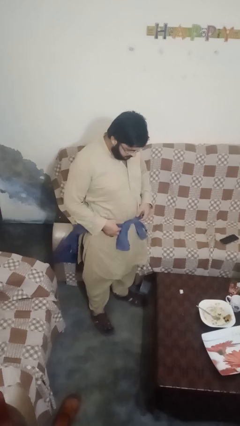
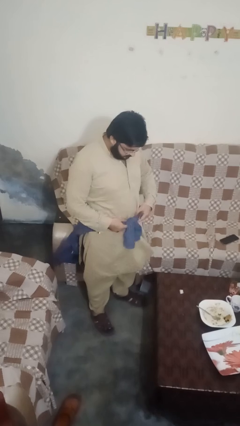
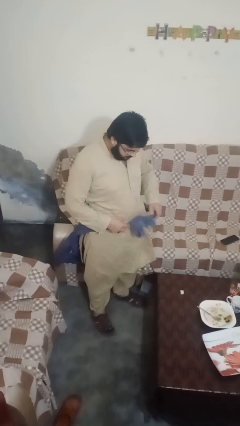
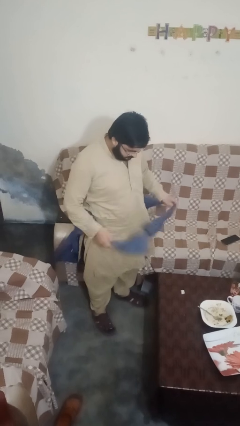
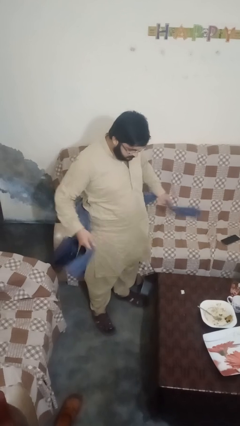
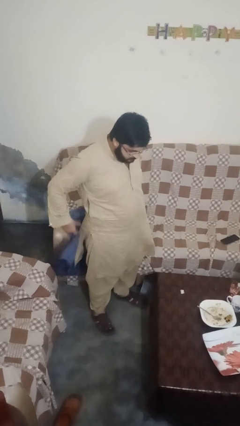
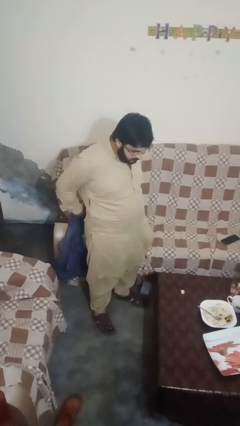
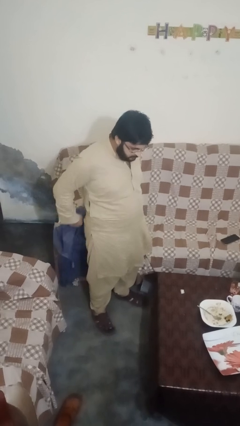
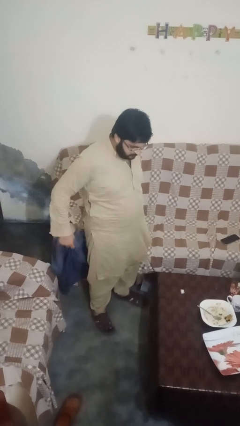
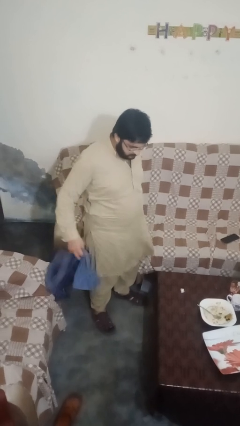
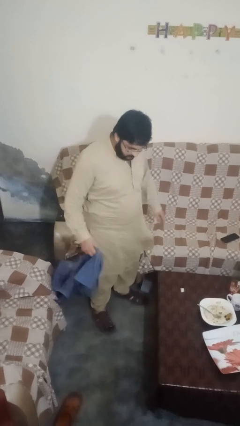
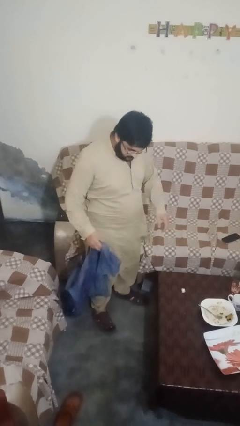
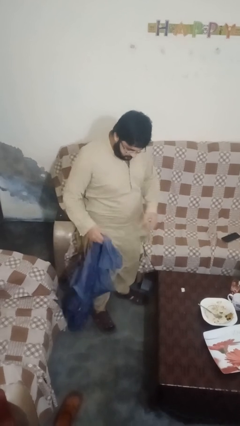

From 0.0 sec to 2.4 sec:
person unties jacket around waist

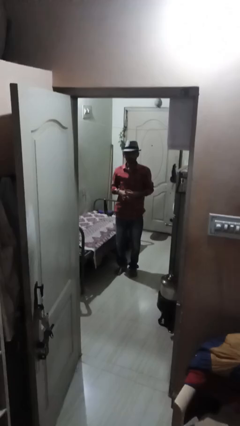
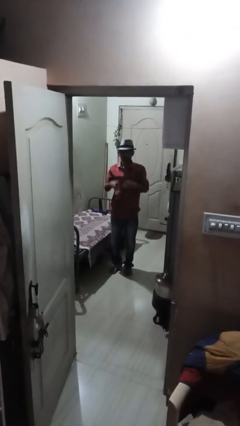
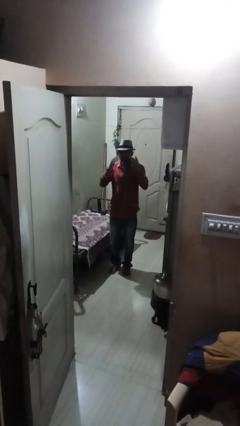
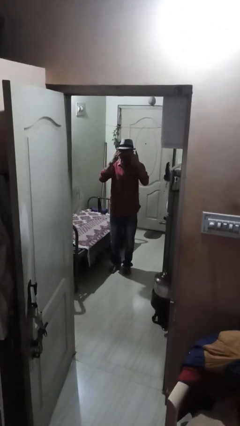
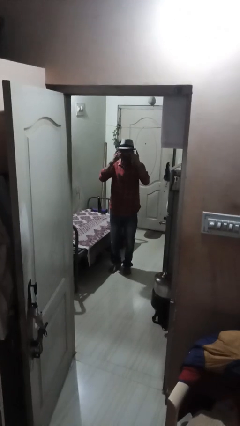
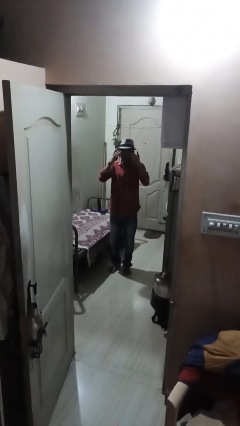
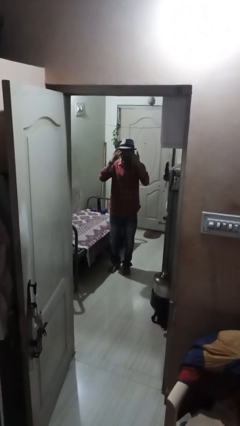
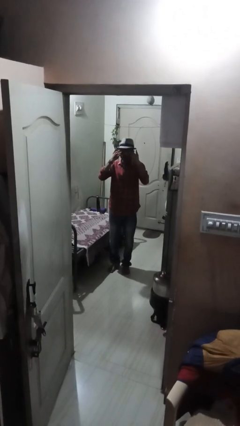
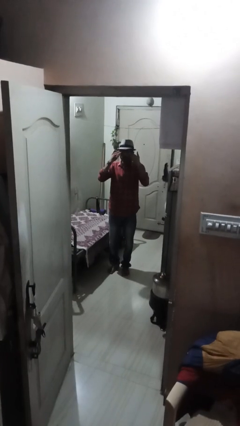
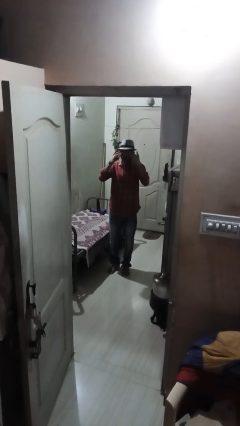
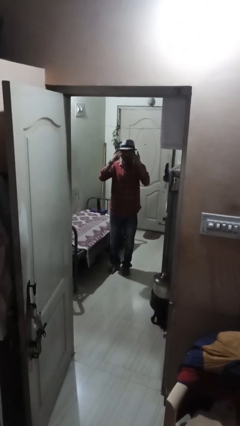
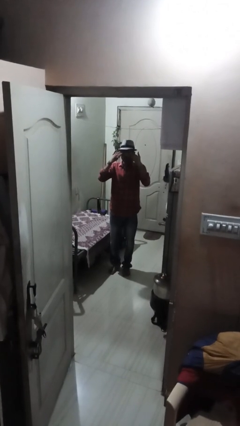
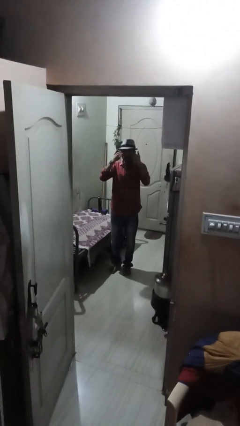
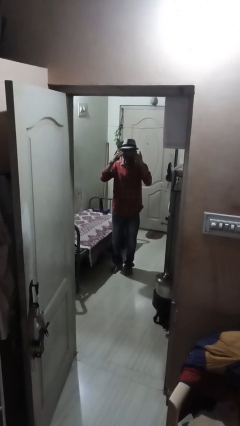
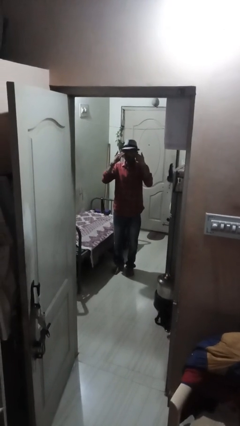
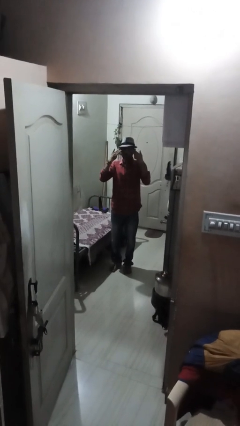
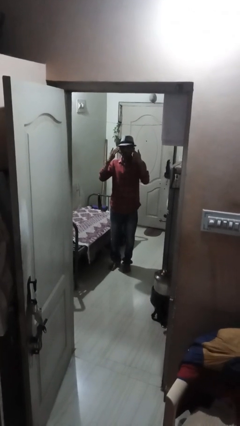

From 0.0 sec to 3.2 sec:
person rubs eyes

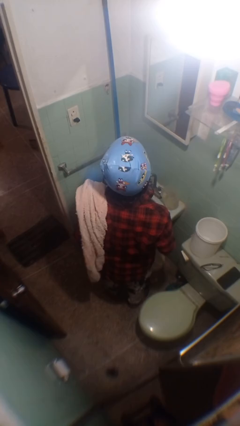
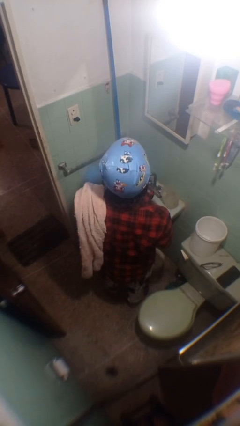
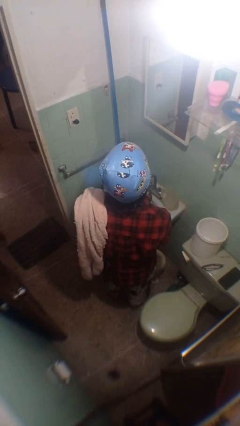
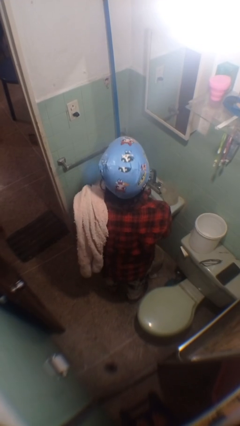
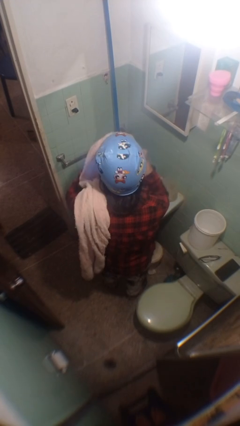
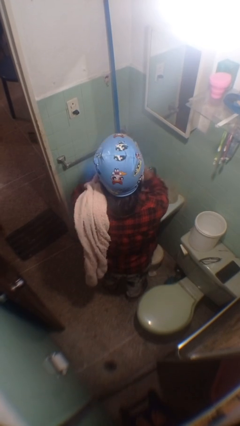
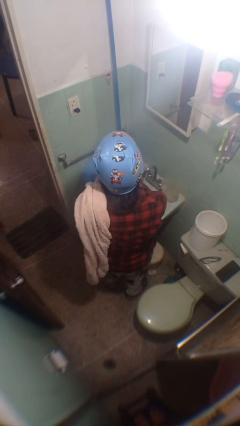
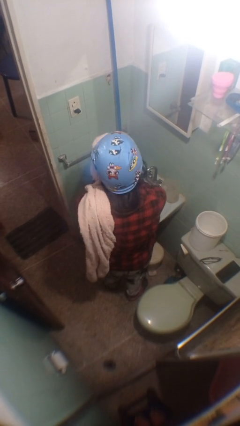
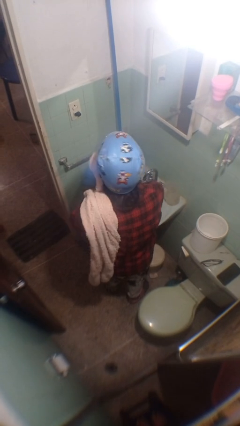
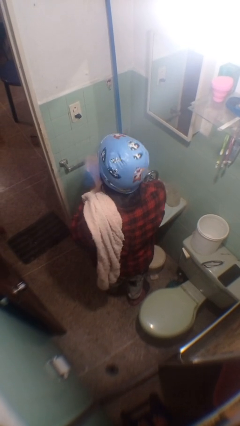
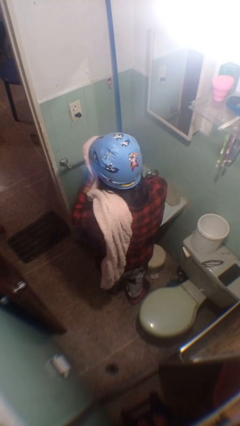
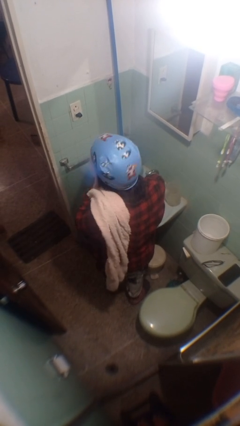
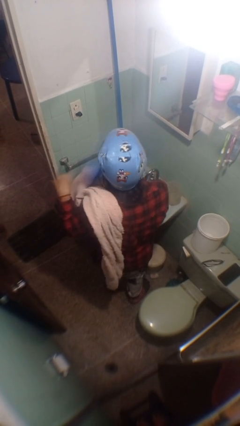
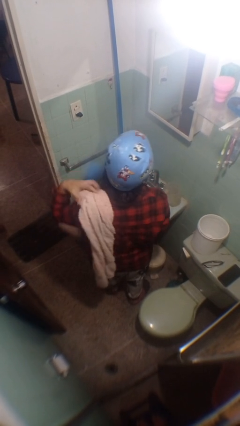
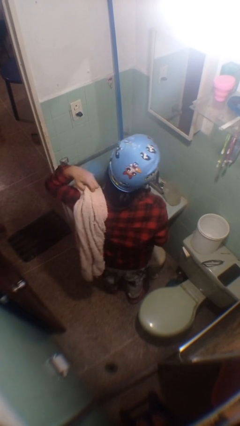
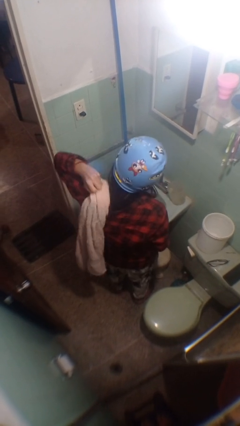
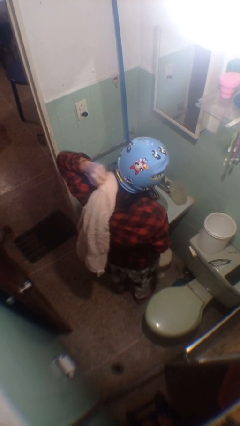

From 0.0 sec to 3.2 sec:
person dries face with towel

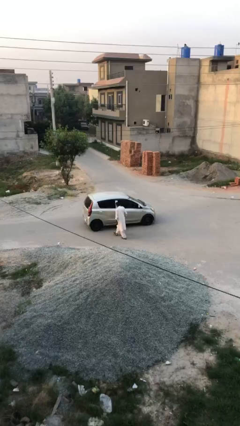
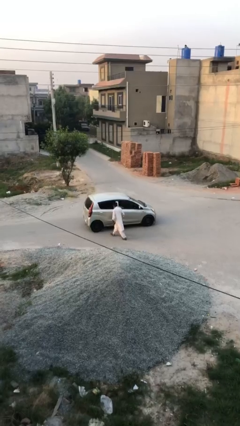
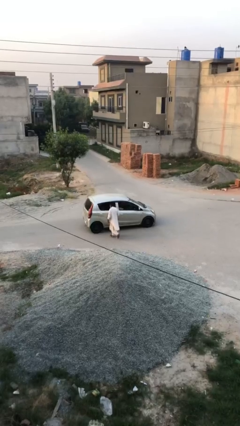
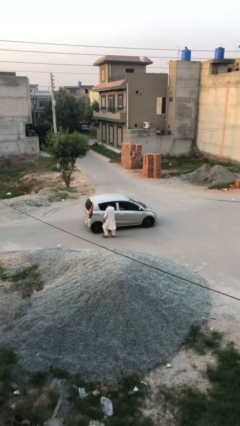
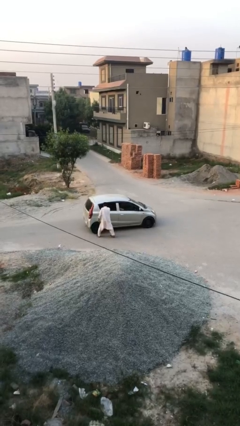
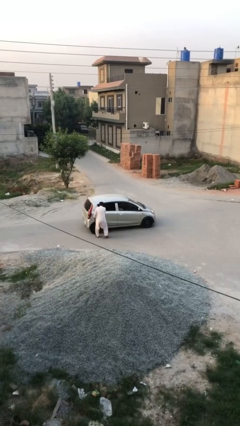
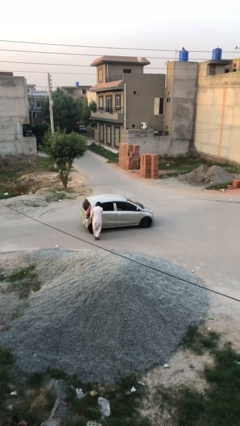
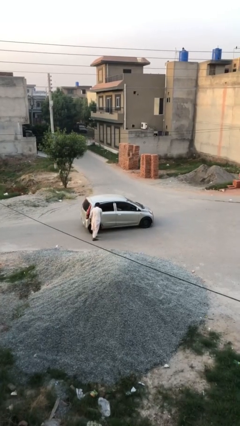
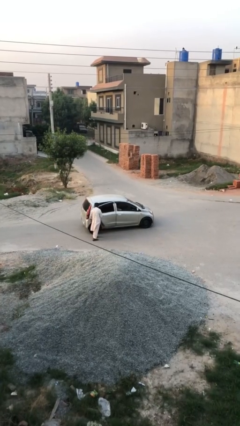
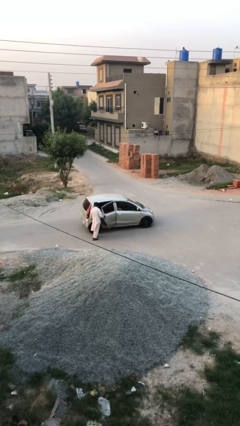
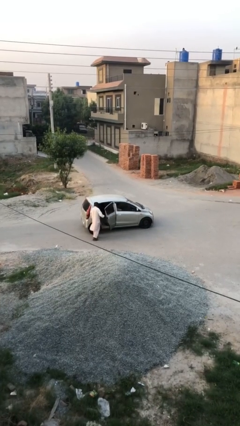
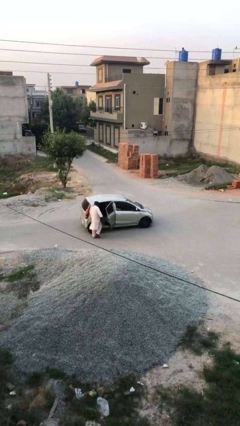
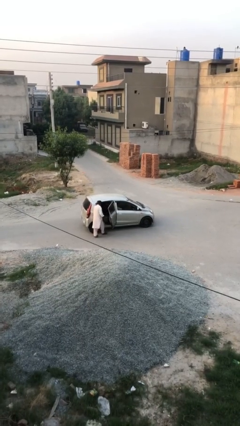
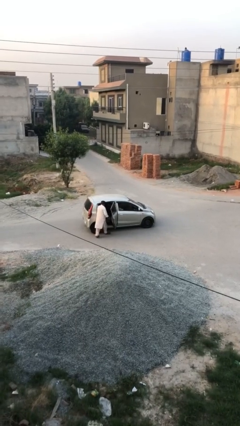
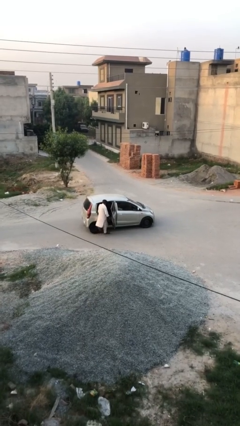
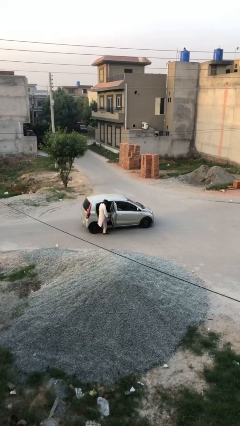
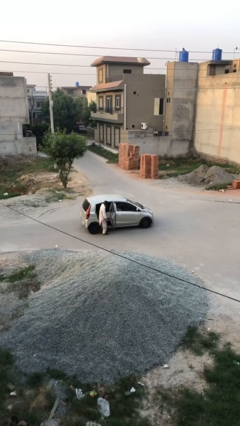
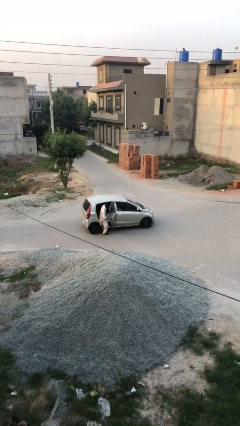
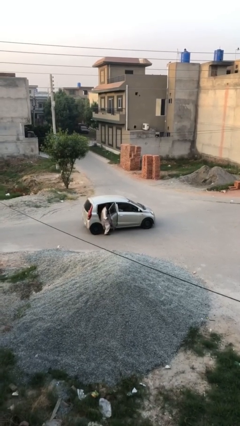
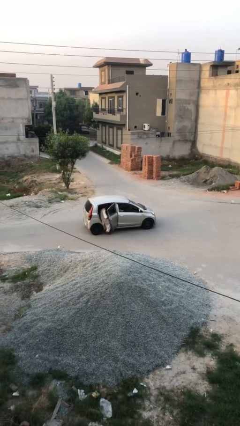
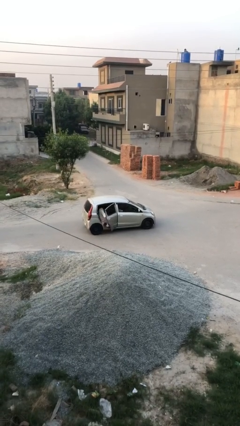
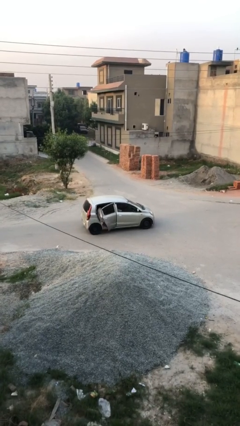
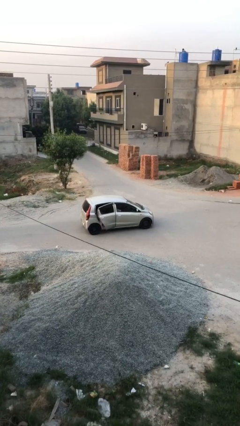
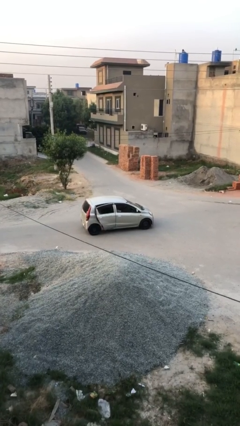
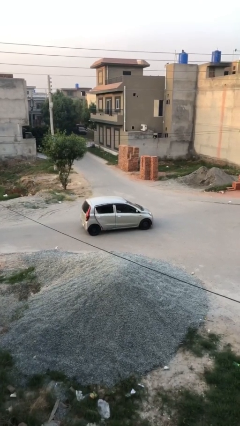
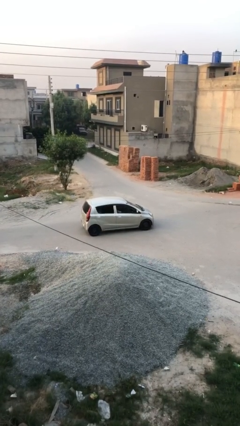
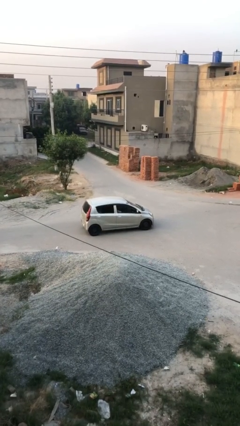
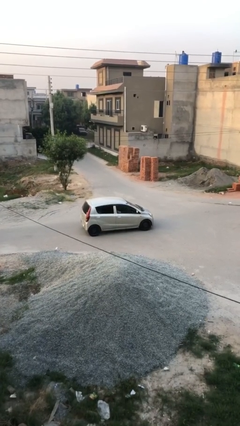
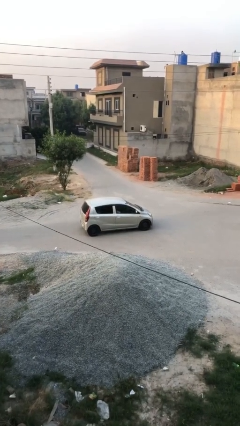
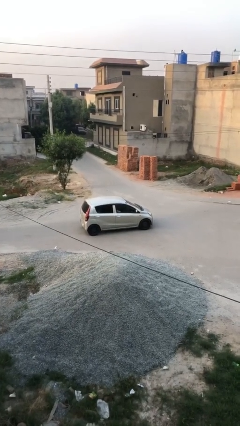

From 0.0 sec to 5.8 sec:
car picks up person

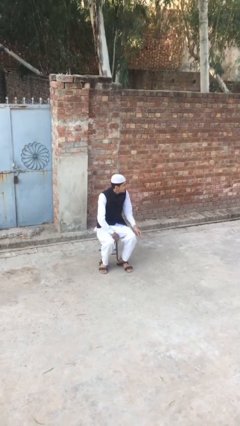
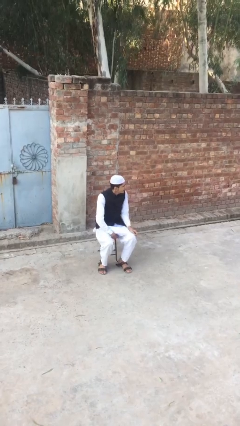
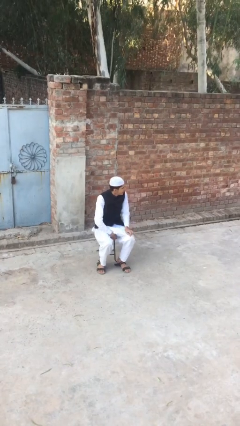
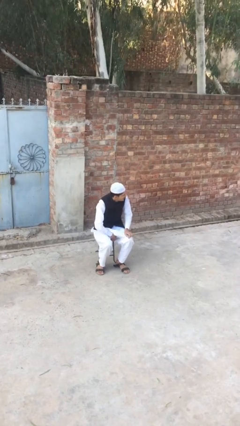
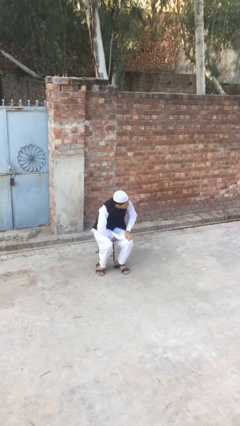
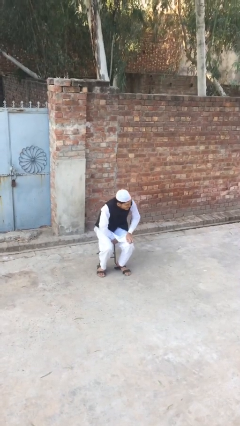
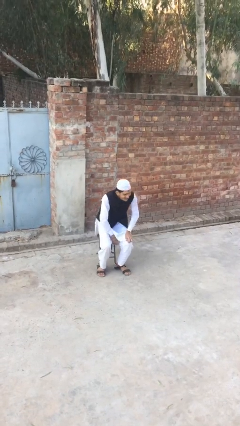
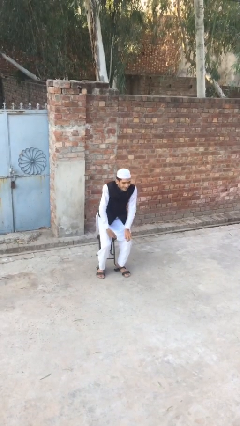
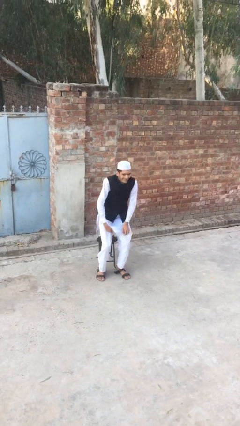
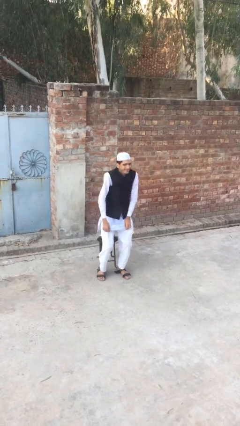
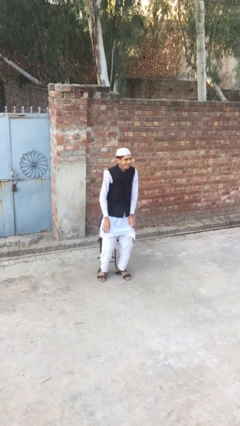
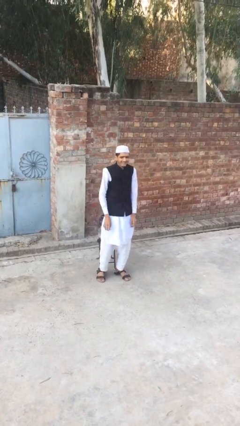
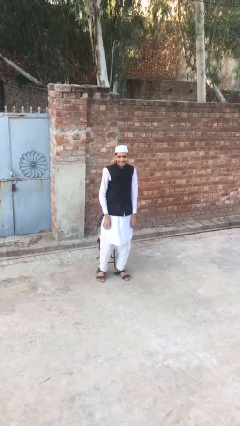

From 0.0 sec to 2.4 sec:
person stands up

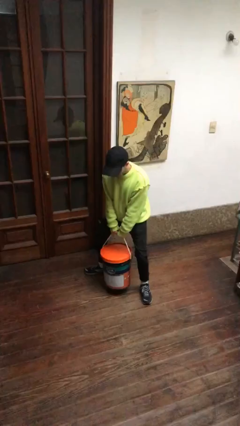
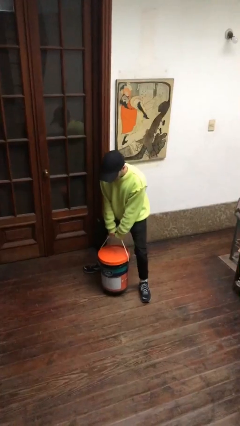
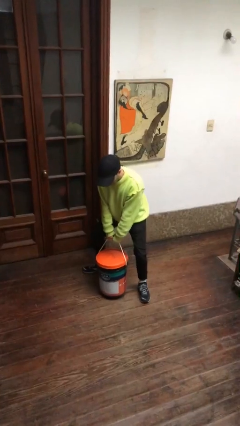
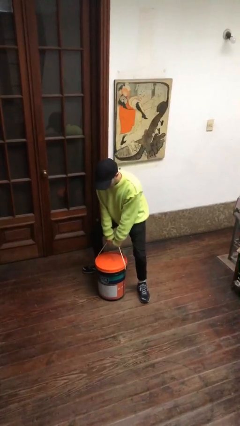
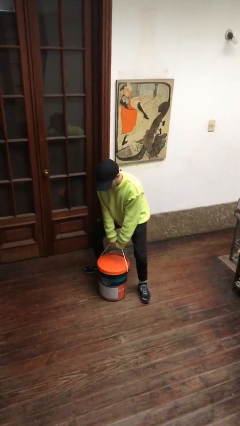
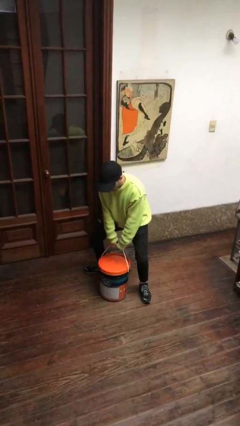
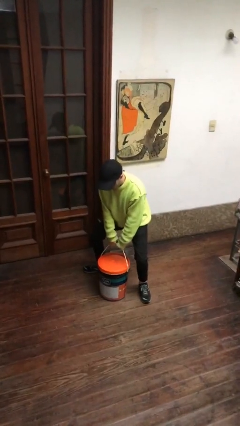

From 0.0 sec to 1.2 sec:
person puts down object on floor
